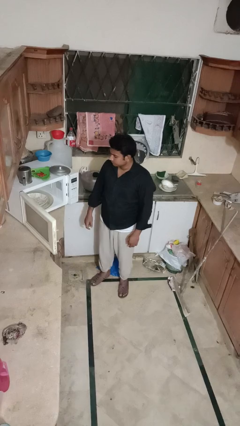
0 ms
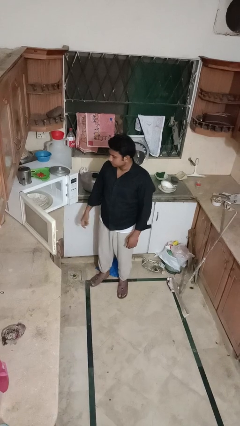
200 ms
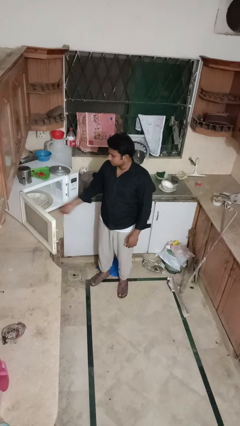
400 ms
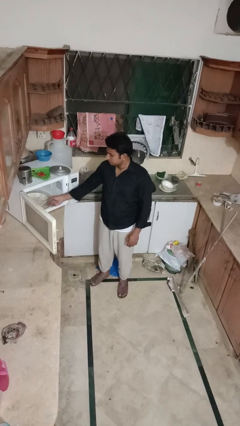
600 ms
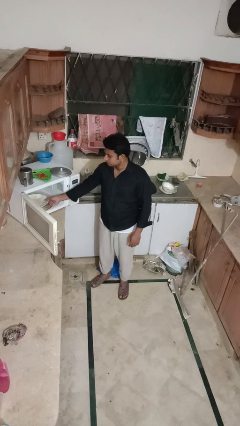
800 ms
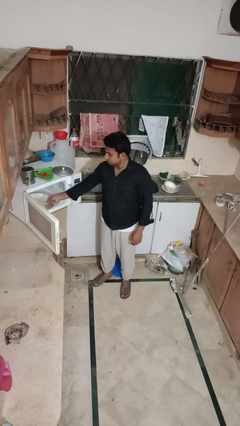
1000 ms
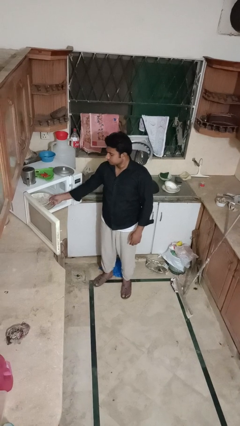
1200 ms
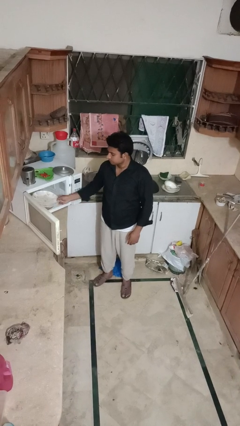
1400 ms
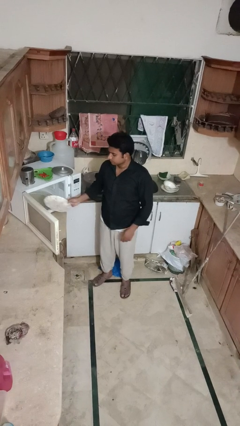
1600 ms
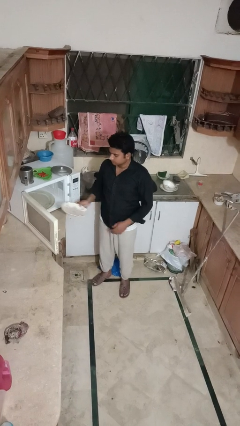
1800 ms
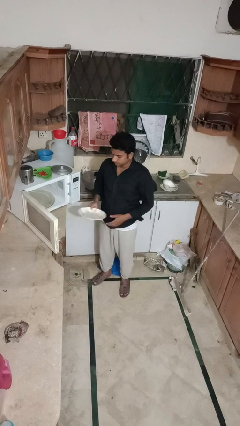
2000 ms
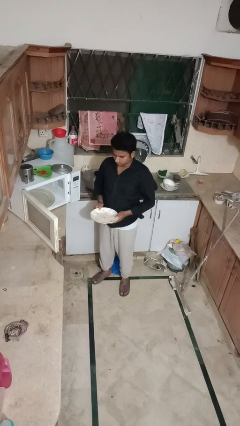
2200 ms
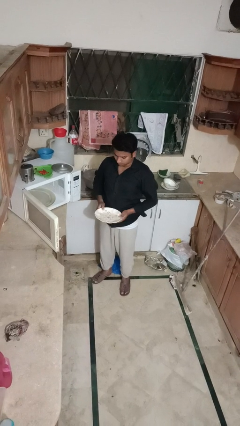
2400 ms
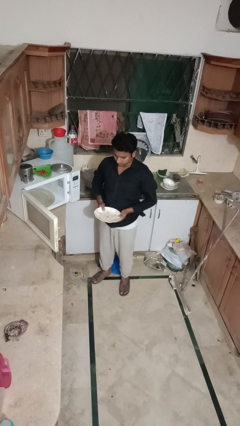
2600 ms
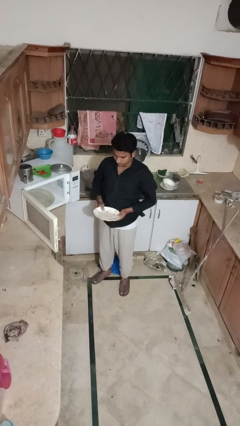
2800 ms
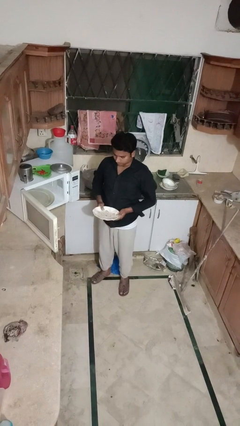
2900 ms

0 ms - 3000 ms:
person takes object from microwave

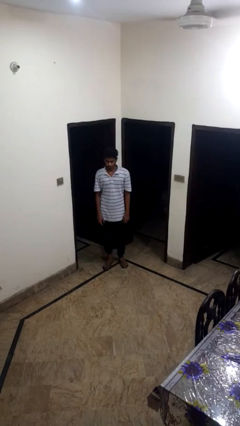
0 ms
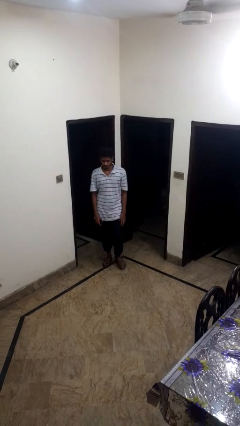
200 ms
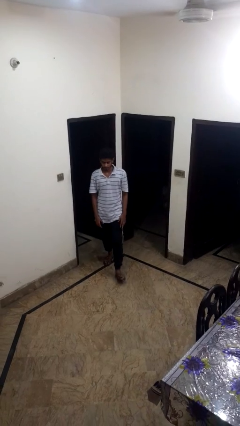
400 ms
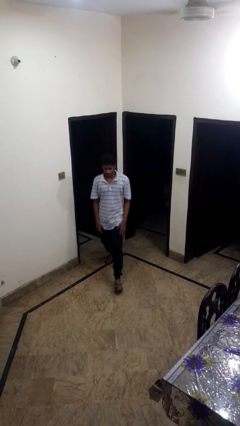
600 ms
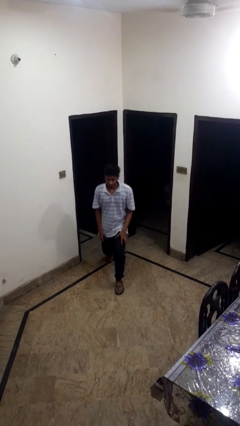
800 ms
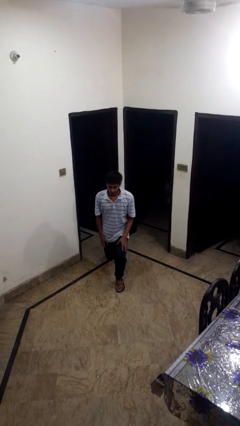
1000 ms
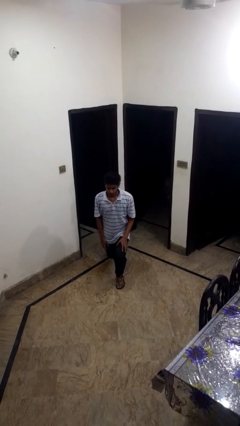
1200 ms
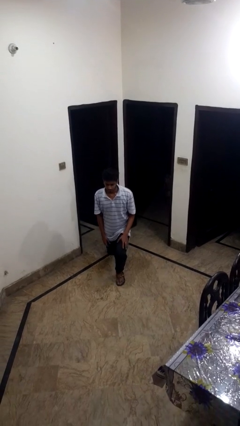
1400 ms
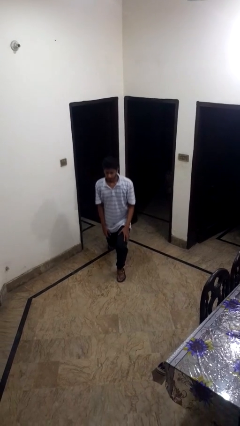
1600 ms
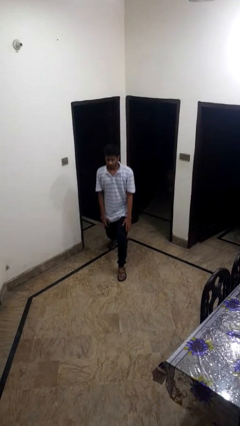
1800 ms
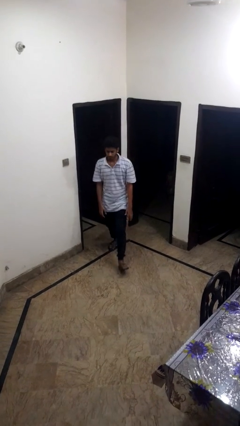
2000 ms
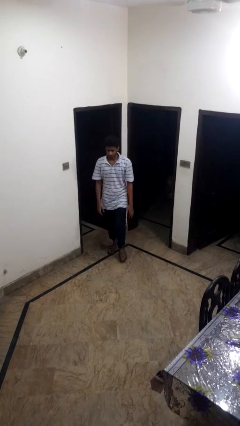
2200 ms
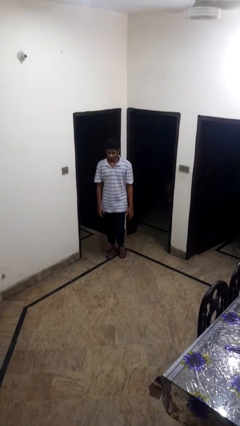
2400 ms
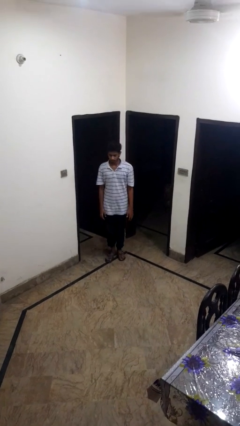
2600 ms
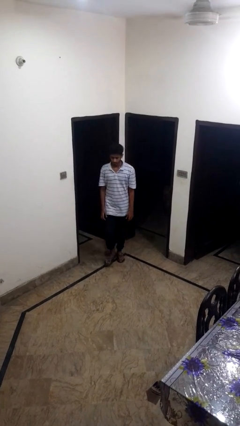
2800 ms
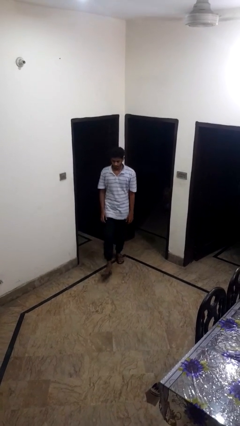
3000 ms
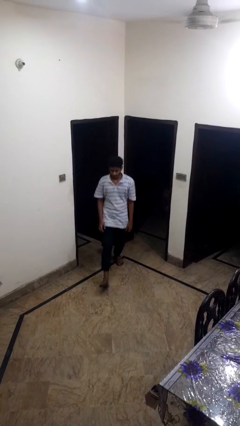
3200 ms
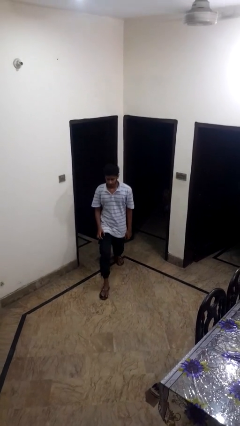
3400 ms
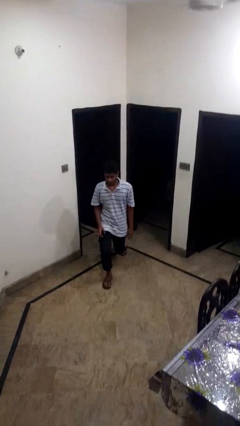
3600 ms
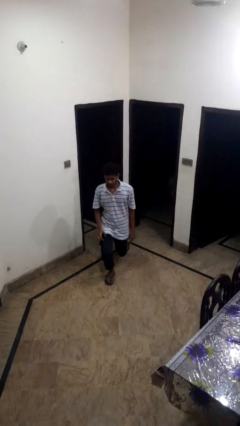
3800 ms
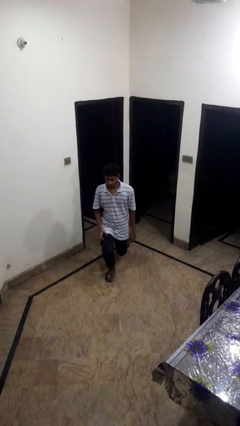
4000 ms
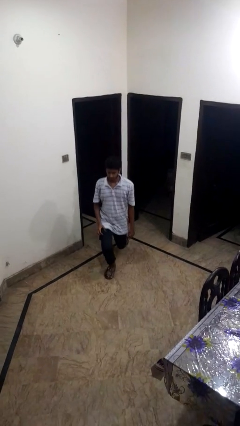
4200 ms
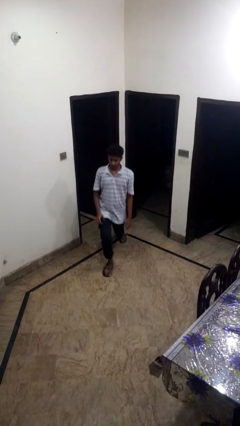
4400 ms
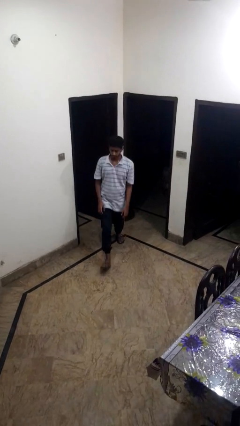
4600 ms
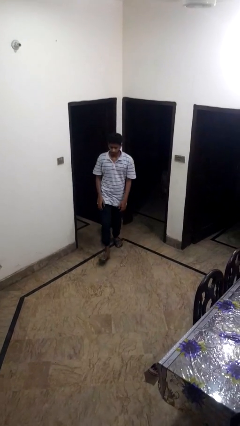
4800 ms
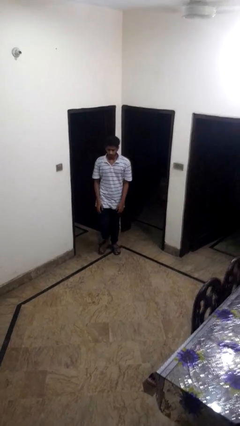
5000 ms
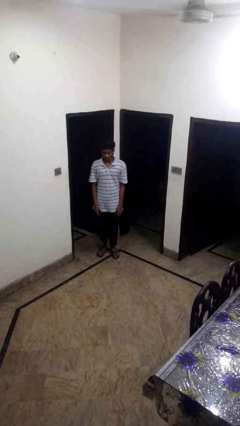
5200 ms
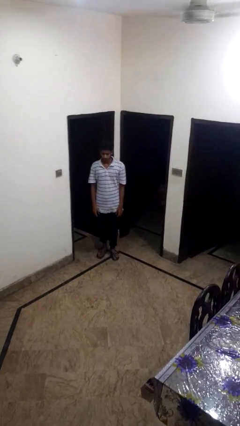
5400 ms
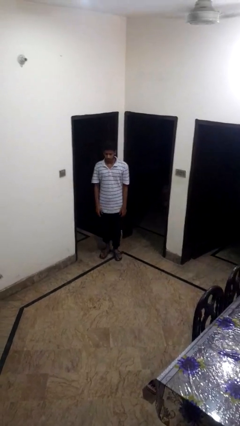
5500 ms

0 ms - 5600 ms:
person exercises with lunges

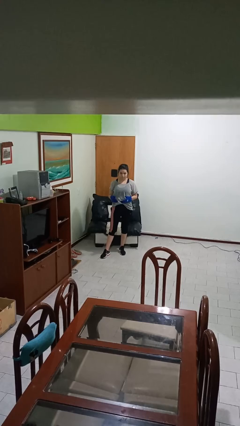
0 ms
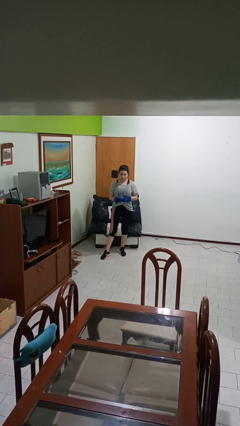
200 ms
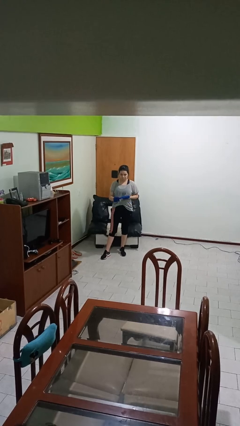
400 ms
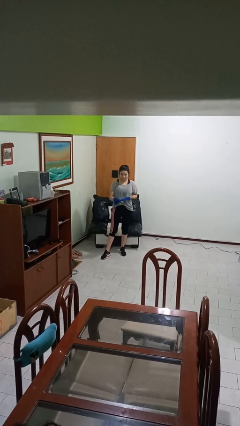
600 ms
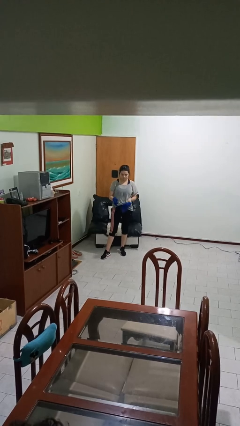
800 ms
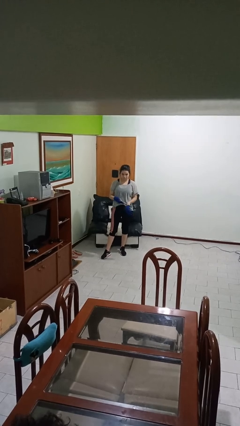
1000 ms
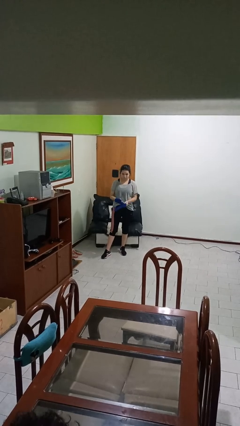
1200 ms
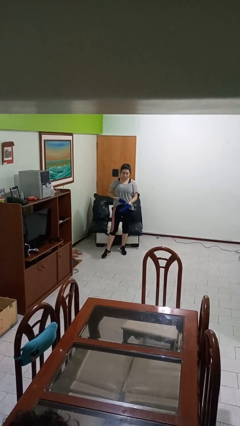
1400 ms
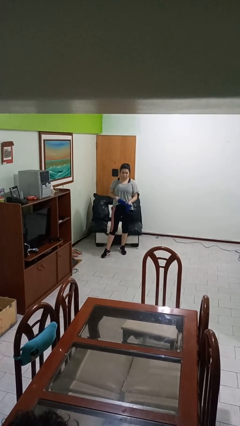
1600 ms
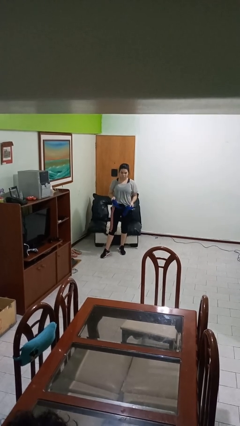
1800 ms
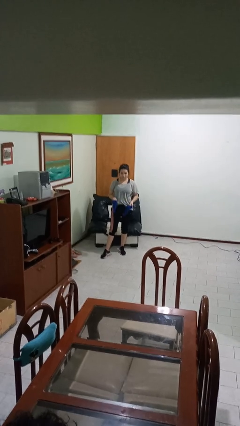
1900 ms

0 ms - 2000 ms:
person takes off gloves

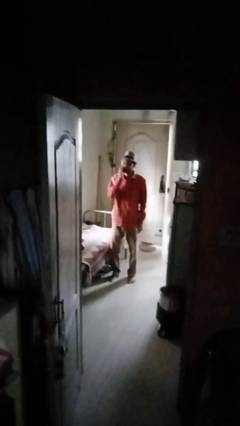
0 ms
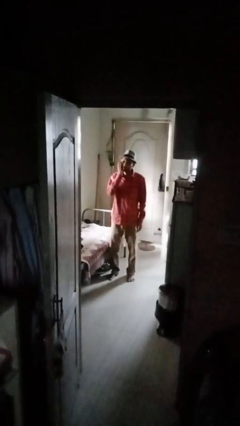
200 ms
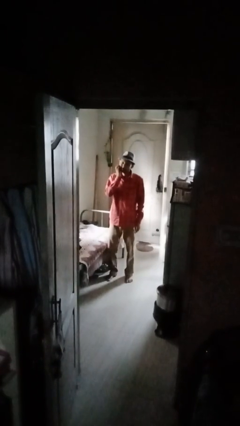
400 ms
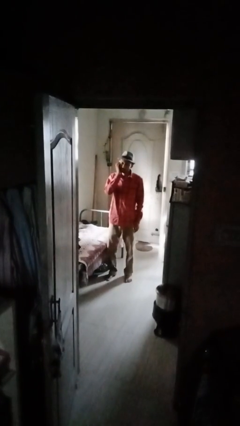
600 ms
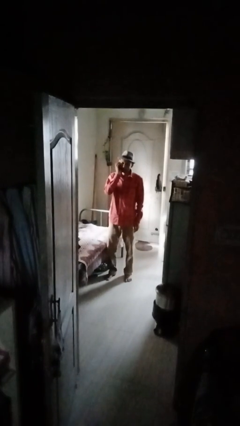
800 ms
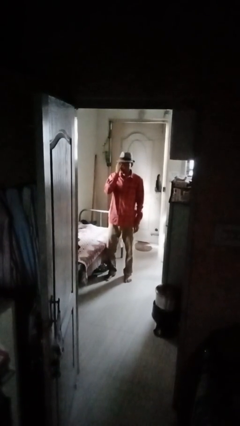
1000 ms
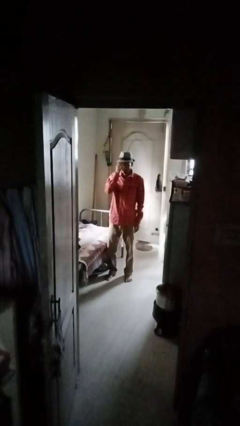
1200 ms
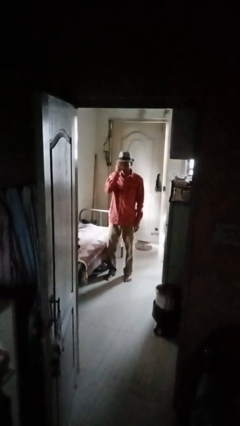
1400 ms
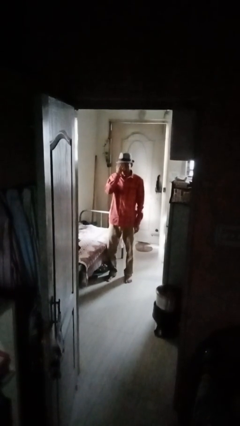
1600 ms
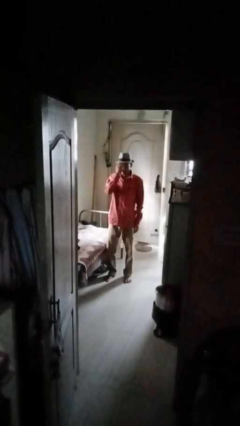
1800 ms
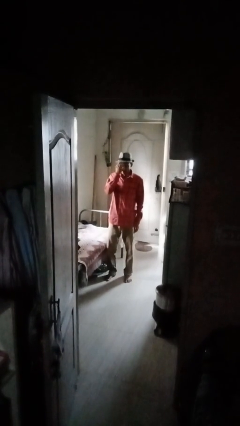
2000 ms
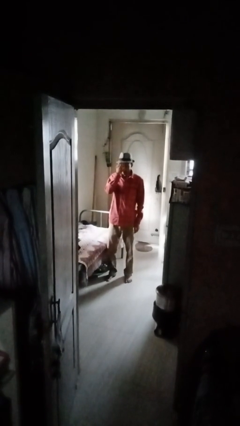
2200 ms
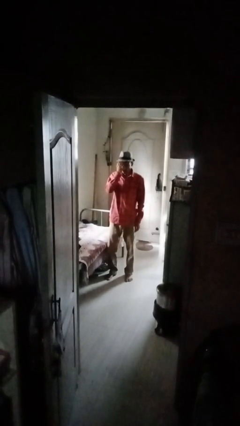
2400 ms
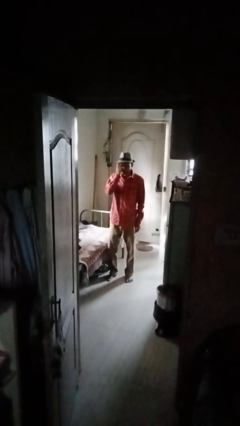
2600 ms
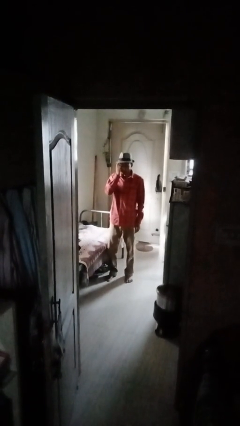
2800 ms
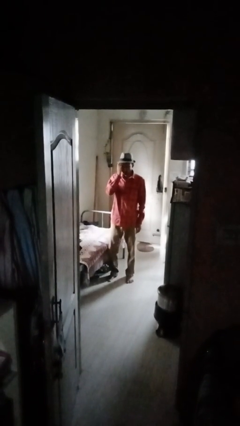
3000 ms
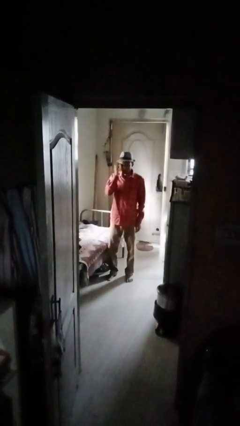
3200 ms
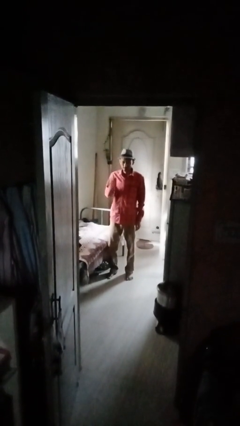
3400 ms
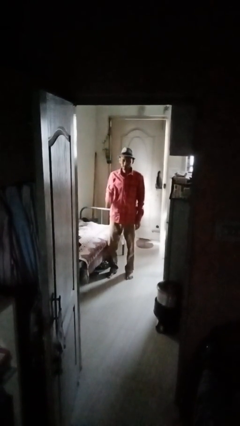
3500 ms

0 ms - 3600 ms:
person scratches face

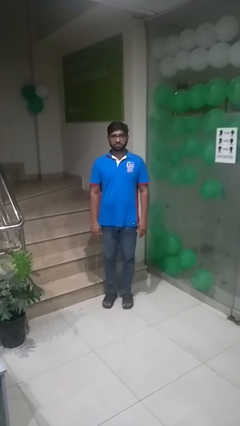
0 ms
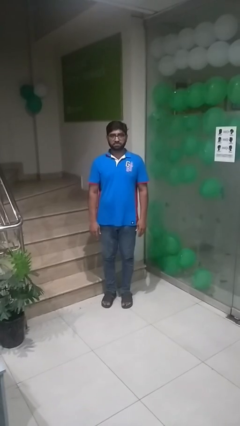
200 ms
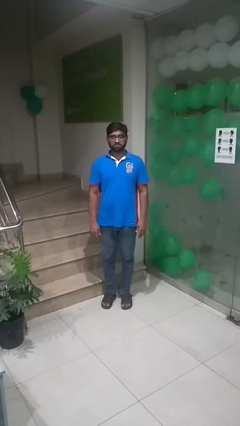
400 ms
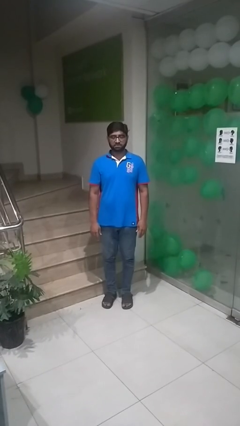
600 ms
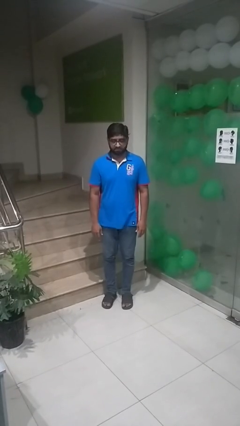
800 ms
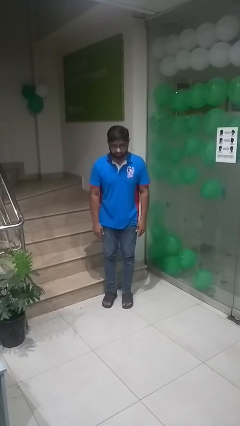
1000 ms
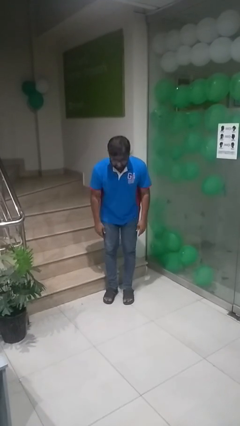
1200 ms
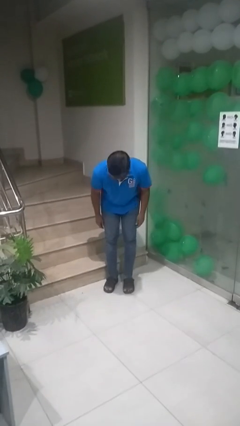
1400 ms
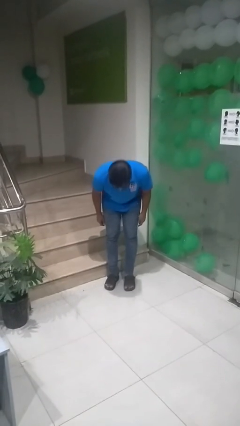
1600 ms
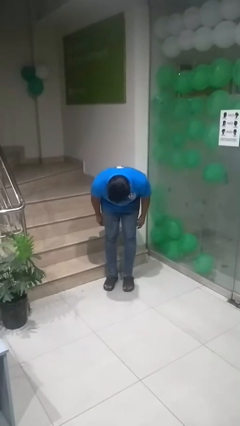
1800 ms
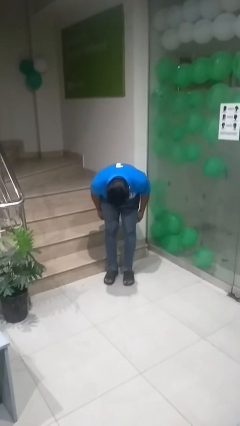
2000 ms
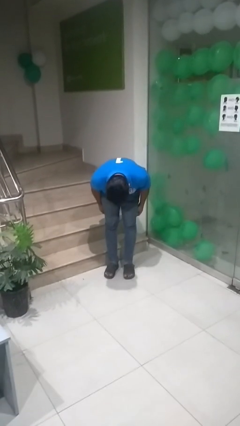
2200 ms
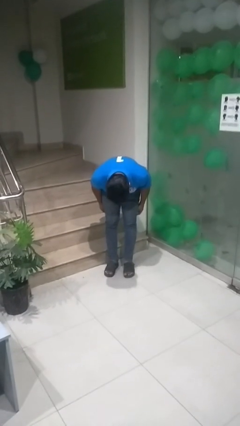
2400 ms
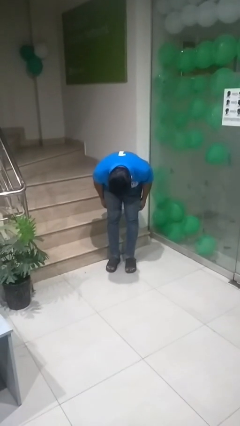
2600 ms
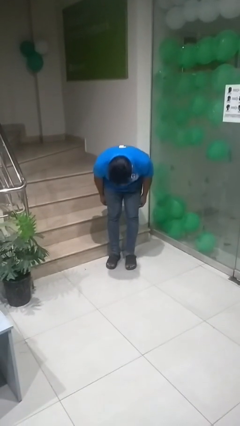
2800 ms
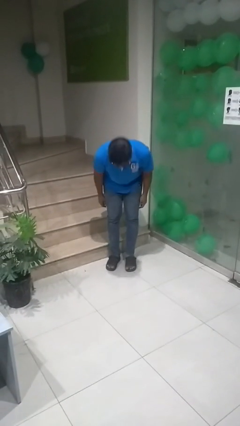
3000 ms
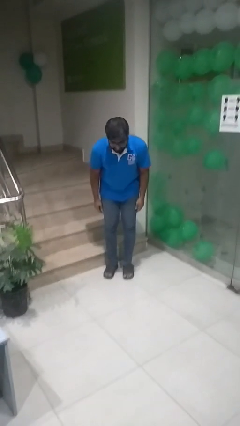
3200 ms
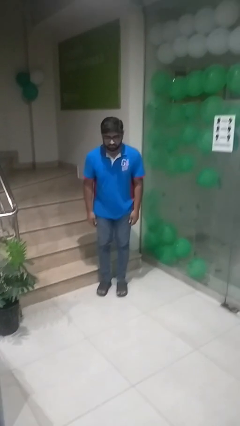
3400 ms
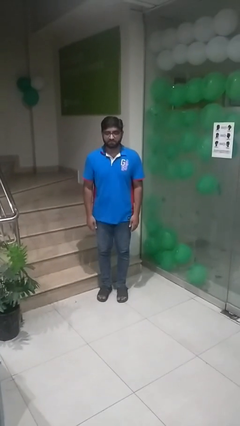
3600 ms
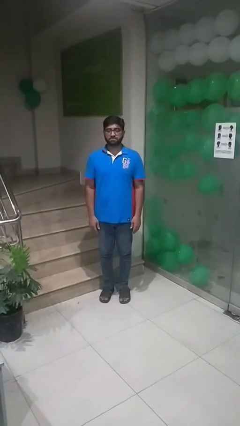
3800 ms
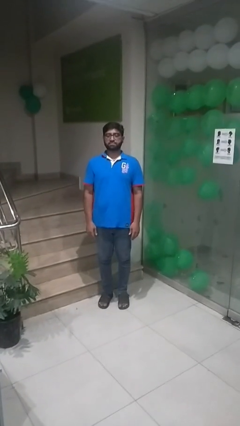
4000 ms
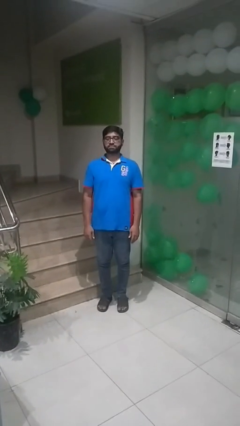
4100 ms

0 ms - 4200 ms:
person bows
